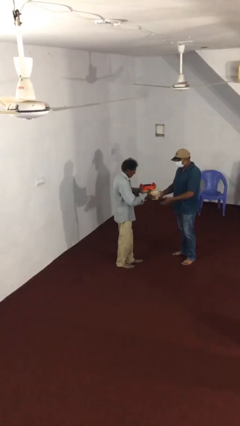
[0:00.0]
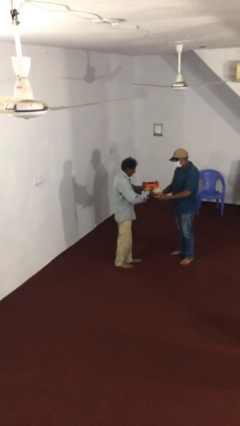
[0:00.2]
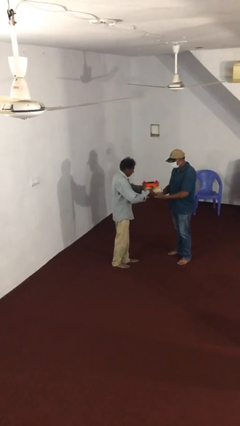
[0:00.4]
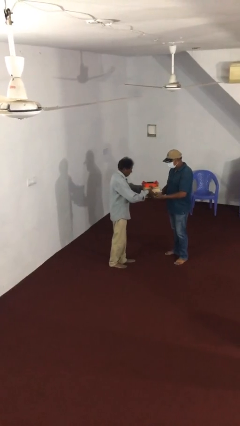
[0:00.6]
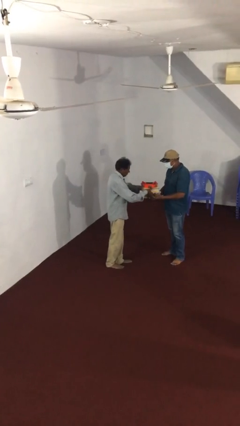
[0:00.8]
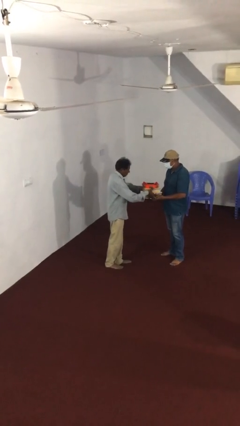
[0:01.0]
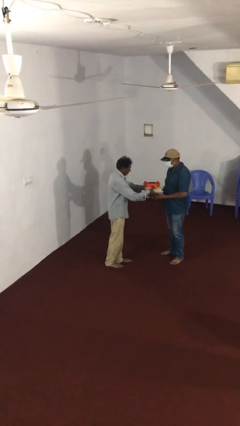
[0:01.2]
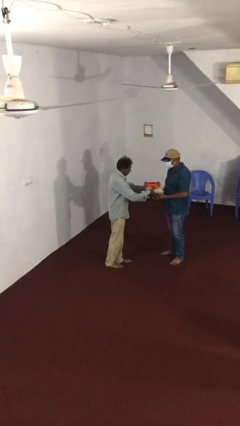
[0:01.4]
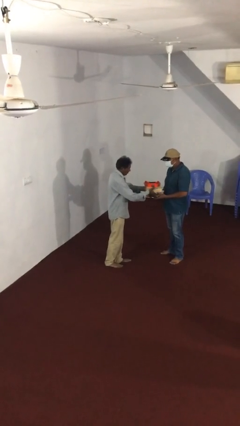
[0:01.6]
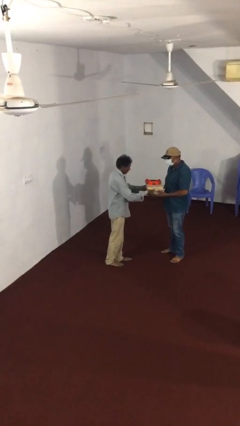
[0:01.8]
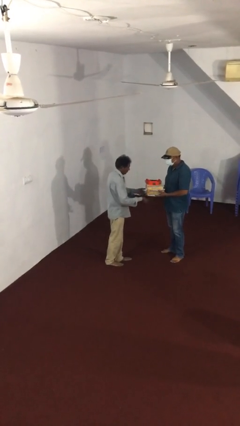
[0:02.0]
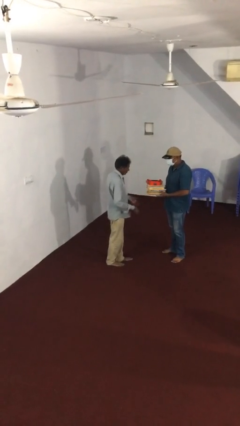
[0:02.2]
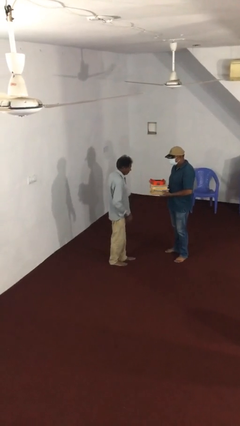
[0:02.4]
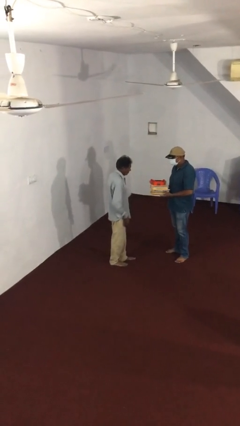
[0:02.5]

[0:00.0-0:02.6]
person transfers object to person

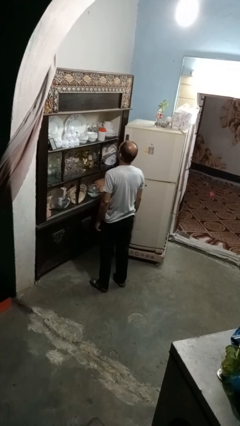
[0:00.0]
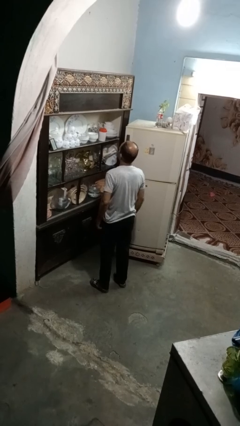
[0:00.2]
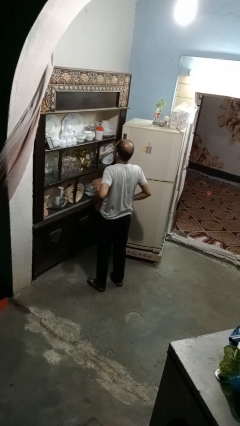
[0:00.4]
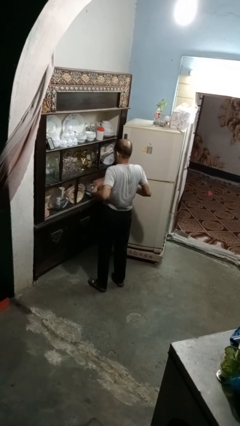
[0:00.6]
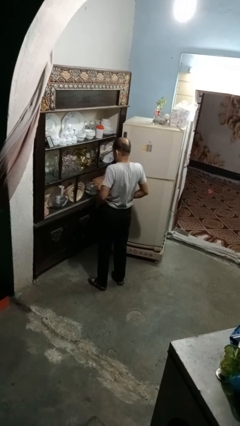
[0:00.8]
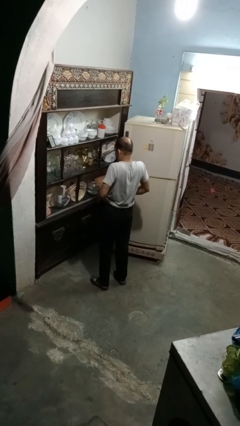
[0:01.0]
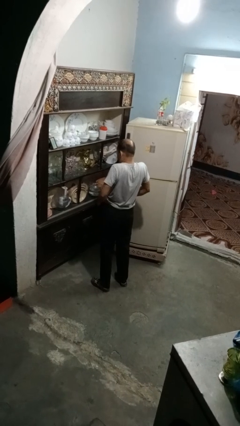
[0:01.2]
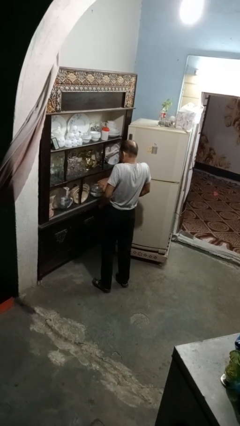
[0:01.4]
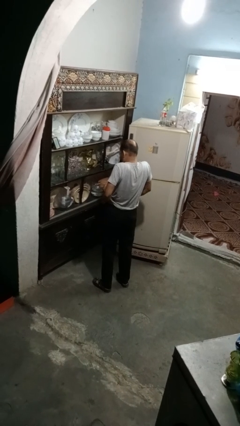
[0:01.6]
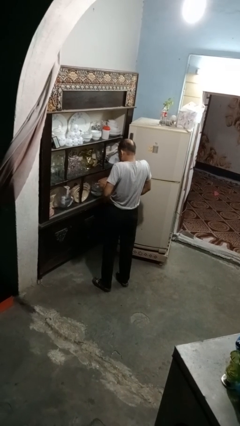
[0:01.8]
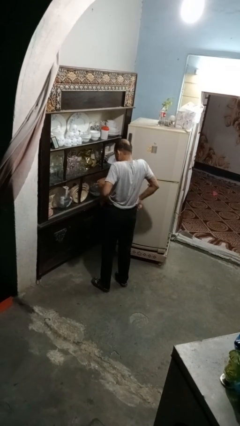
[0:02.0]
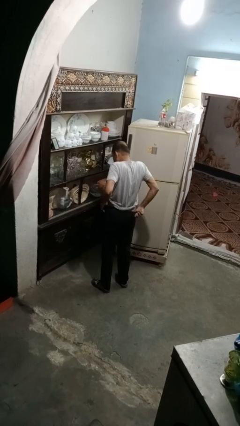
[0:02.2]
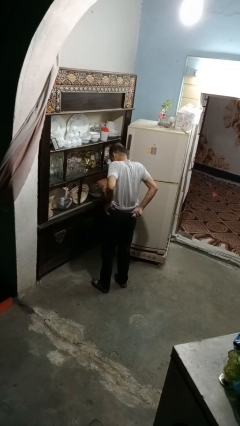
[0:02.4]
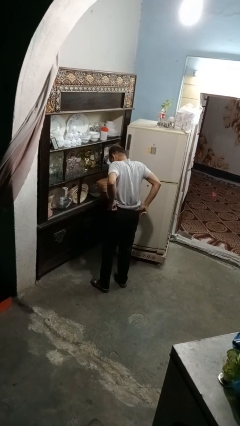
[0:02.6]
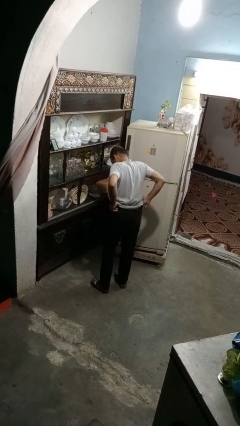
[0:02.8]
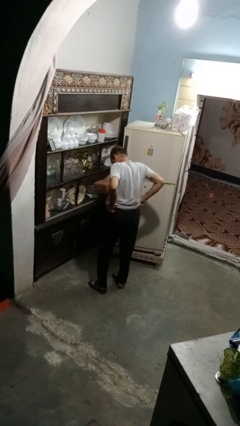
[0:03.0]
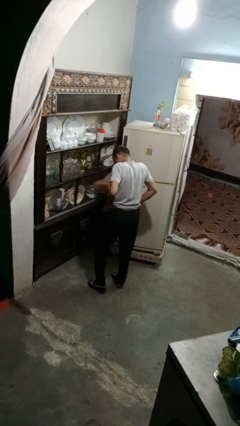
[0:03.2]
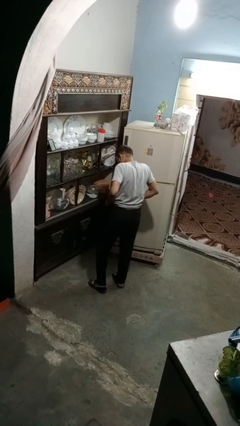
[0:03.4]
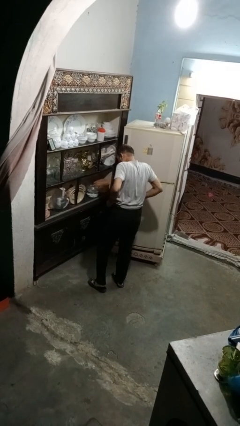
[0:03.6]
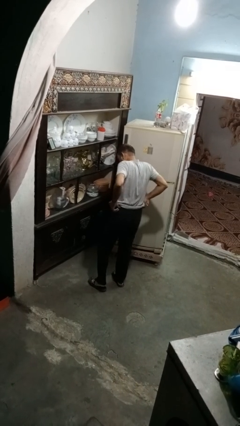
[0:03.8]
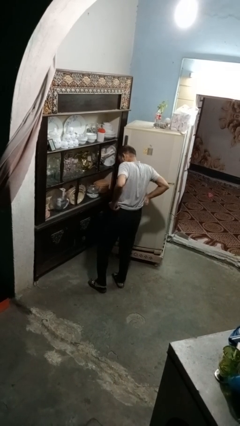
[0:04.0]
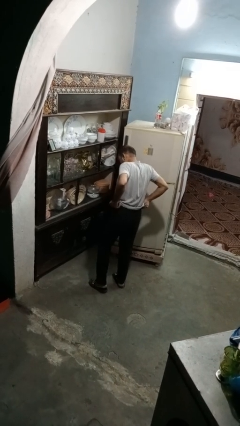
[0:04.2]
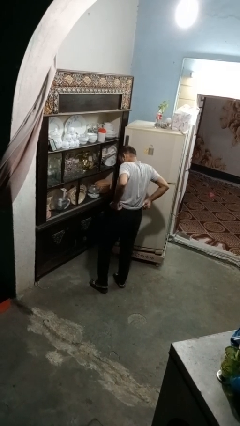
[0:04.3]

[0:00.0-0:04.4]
person hikes up pants

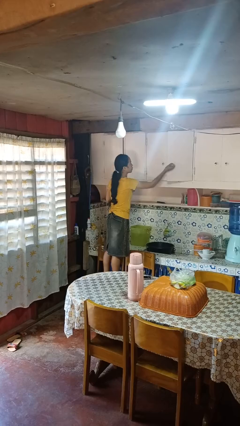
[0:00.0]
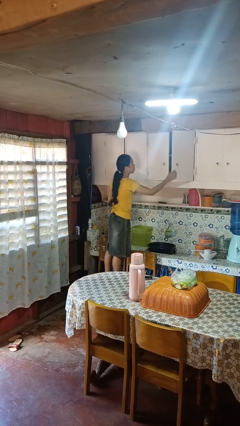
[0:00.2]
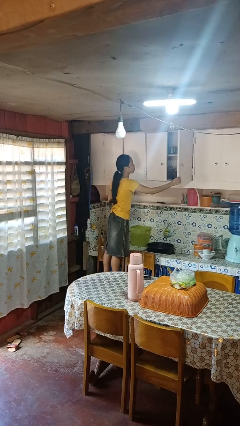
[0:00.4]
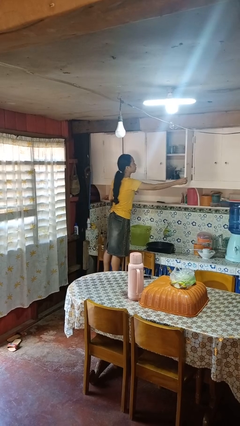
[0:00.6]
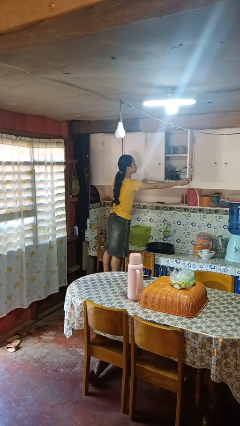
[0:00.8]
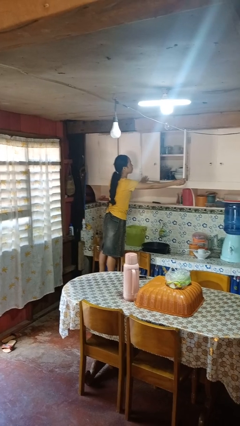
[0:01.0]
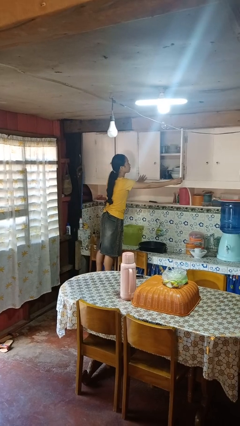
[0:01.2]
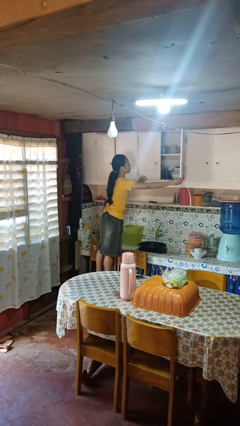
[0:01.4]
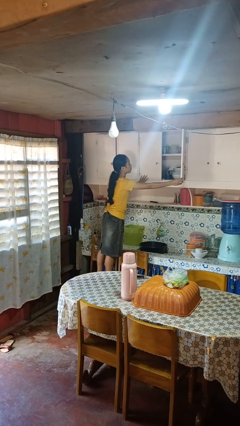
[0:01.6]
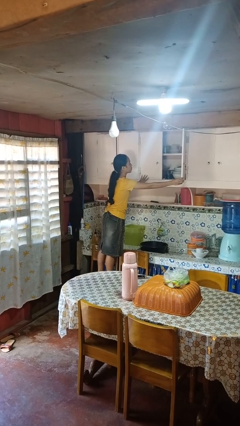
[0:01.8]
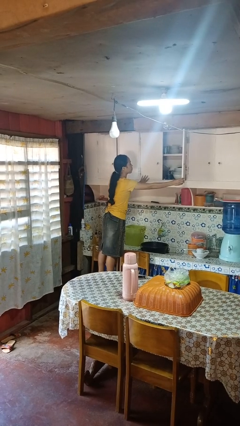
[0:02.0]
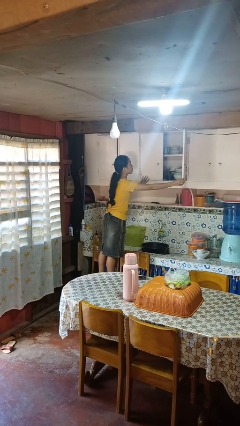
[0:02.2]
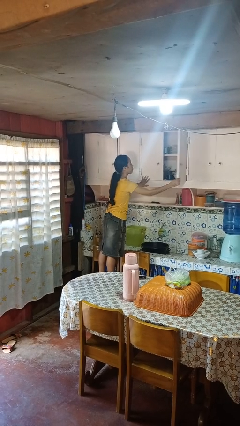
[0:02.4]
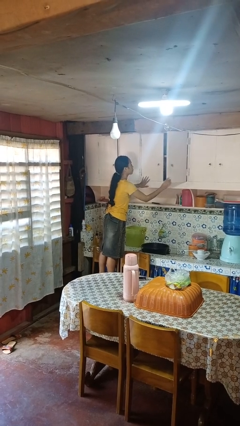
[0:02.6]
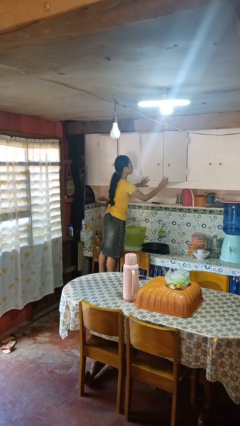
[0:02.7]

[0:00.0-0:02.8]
person opens cabinet

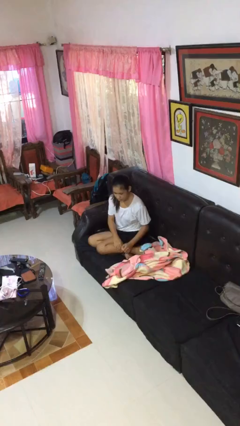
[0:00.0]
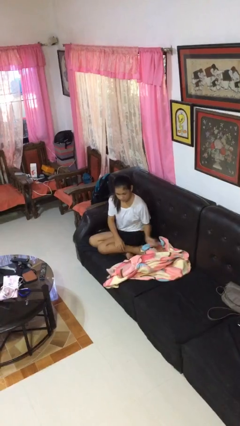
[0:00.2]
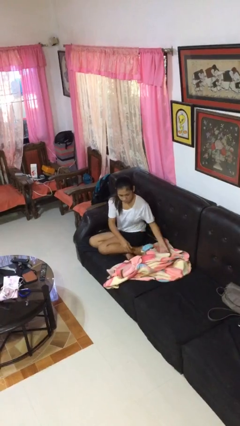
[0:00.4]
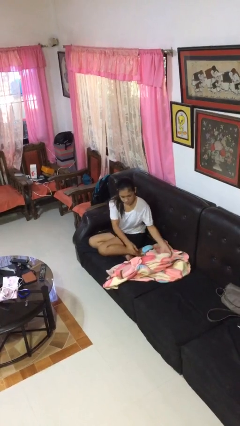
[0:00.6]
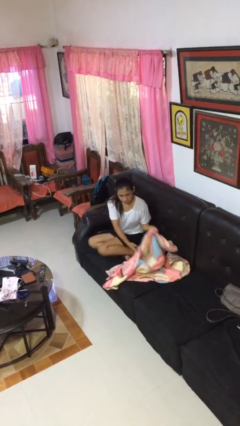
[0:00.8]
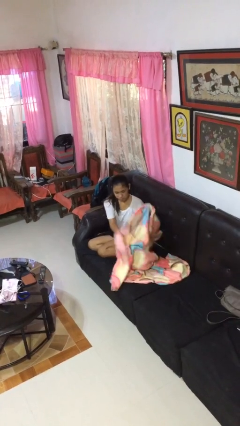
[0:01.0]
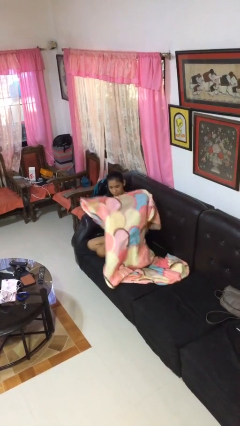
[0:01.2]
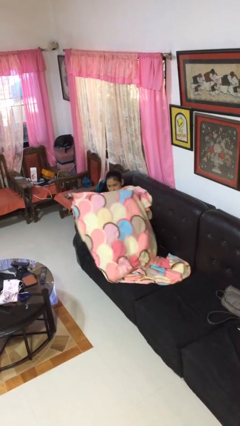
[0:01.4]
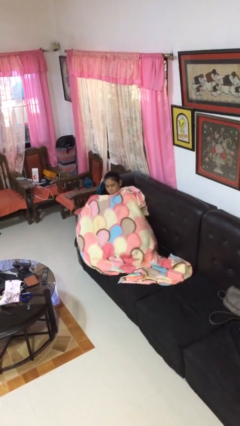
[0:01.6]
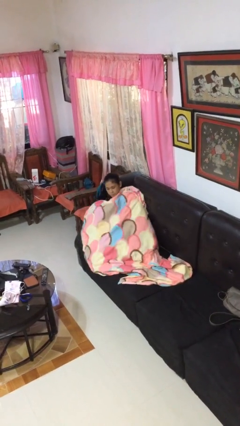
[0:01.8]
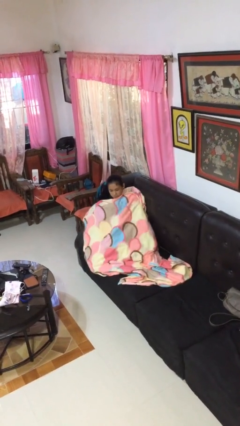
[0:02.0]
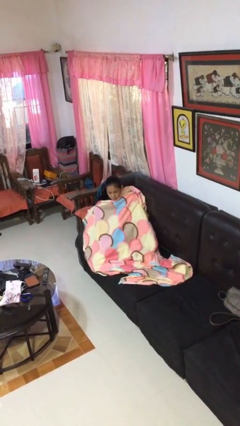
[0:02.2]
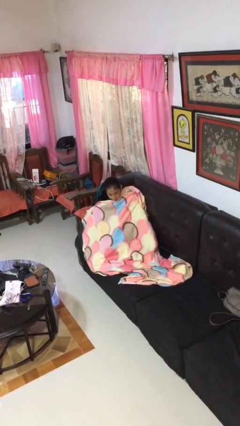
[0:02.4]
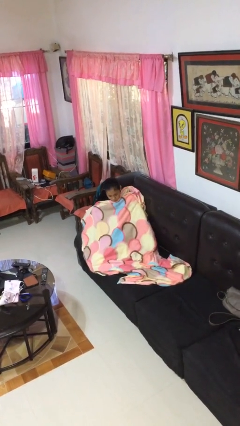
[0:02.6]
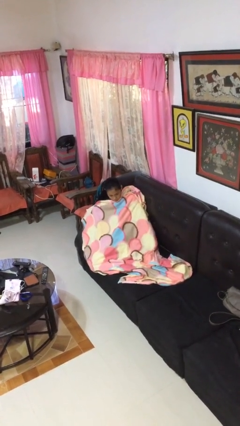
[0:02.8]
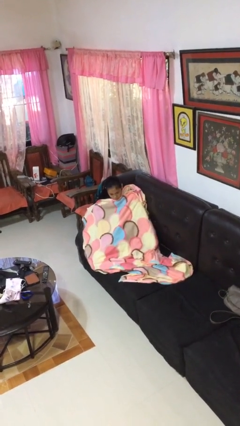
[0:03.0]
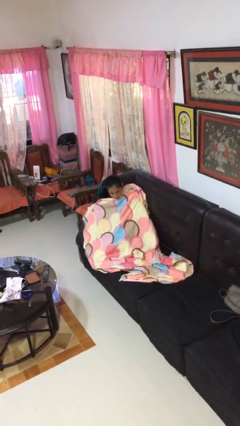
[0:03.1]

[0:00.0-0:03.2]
person covers with blanket

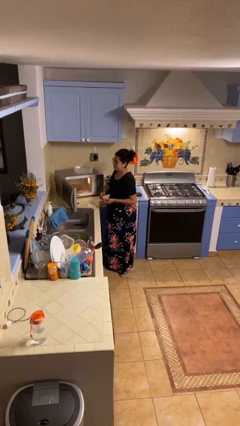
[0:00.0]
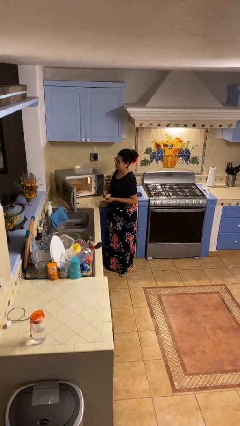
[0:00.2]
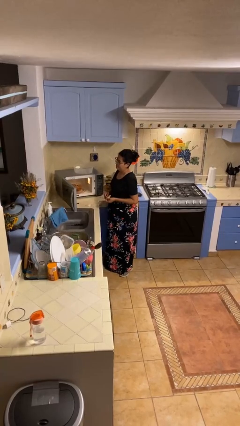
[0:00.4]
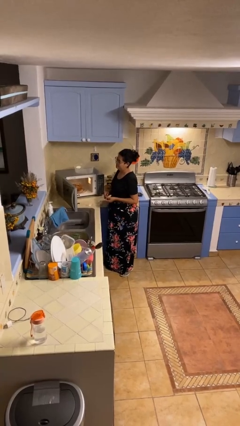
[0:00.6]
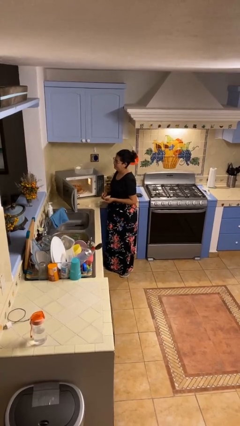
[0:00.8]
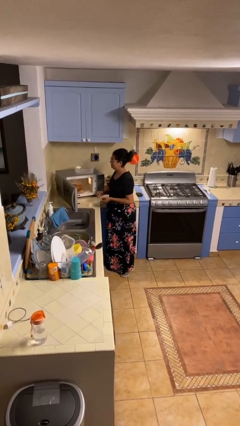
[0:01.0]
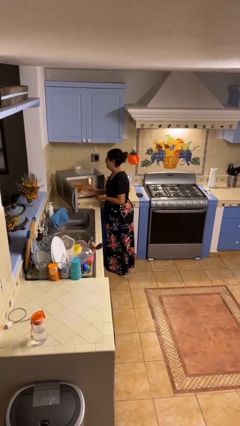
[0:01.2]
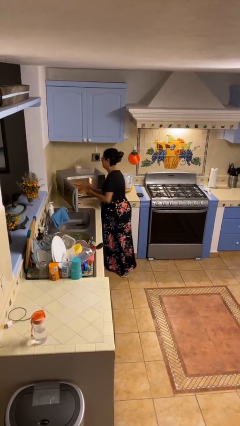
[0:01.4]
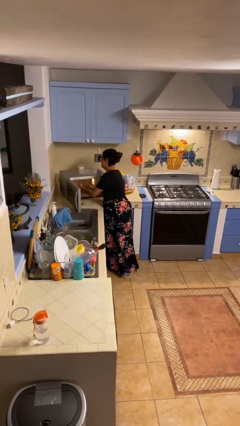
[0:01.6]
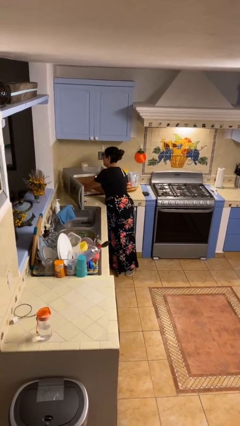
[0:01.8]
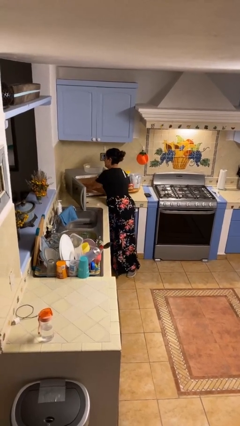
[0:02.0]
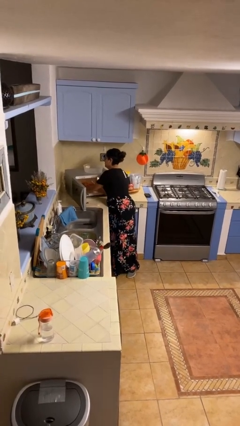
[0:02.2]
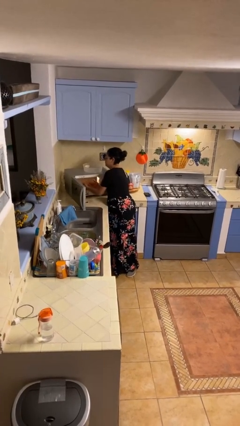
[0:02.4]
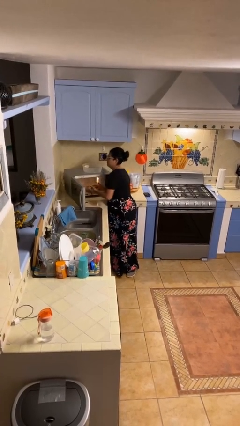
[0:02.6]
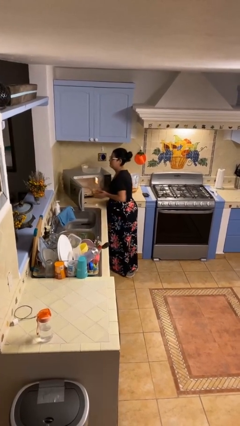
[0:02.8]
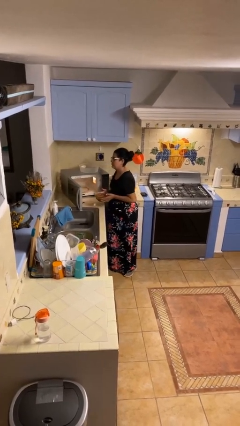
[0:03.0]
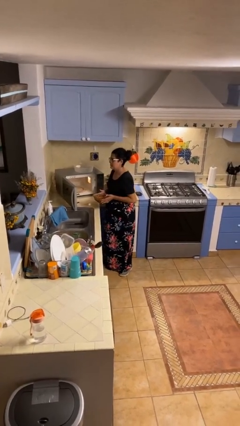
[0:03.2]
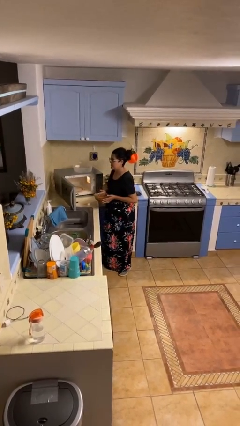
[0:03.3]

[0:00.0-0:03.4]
person takes object from microwave

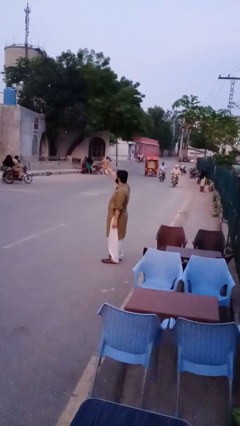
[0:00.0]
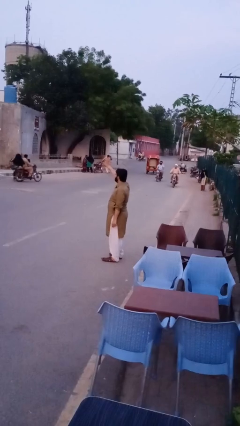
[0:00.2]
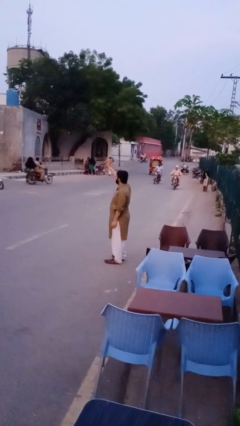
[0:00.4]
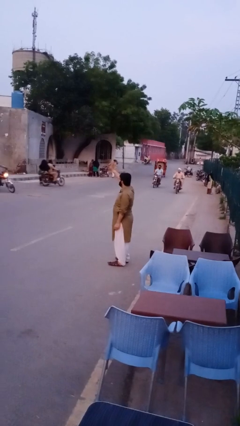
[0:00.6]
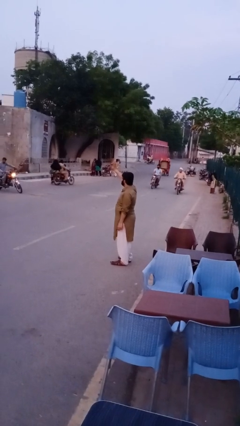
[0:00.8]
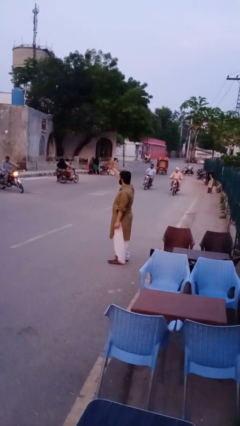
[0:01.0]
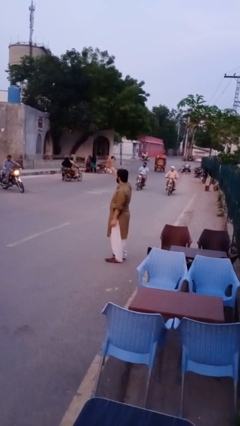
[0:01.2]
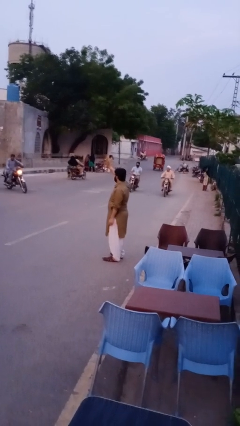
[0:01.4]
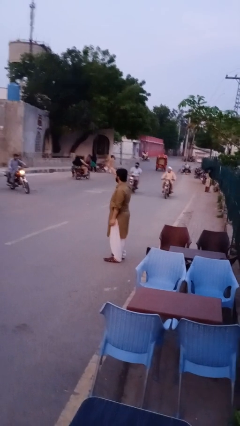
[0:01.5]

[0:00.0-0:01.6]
person waves at person
